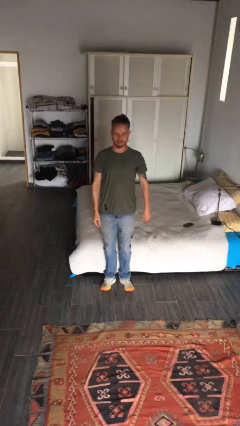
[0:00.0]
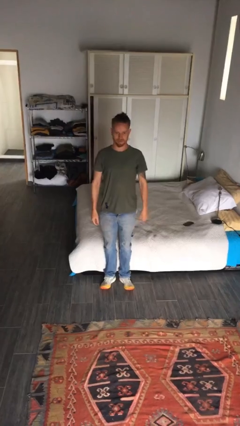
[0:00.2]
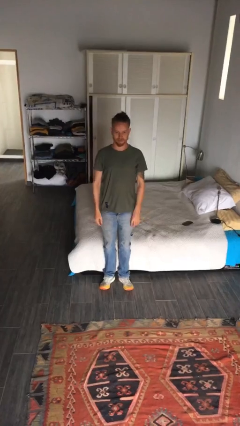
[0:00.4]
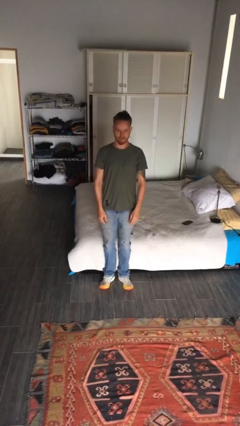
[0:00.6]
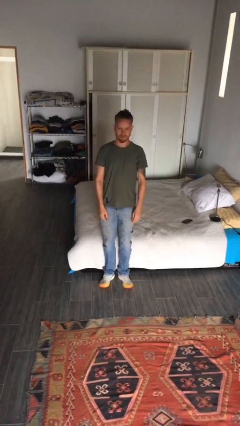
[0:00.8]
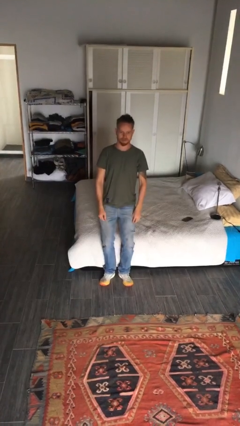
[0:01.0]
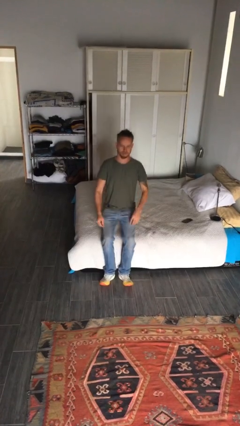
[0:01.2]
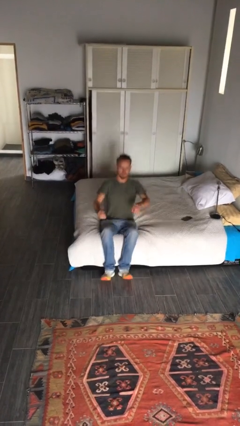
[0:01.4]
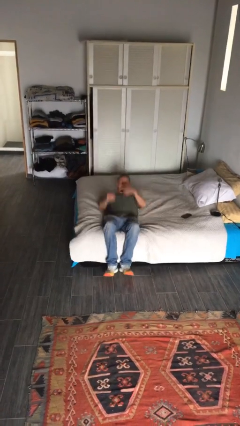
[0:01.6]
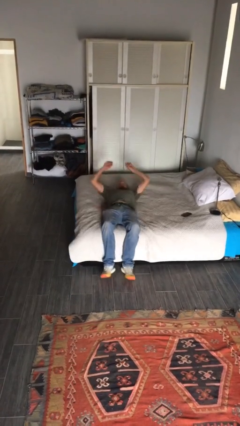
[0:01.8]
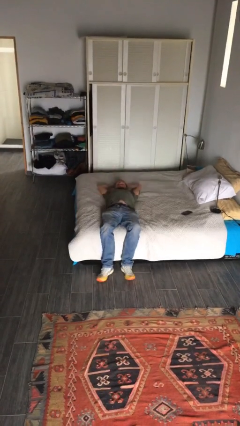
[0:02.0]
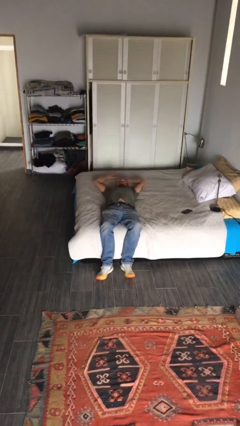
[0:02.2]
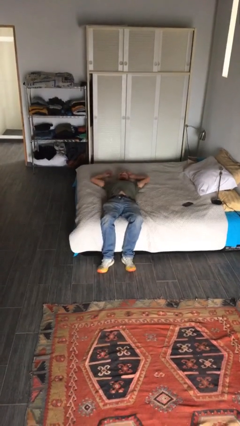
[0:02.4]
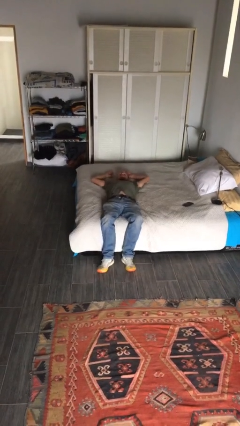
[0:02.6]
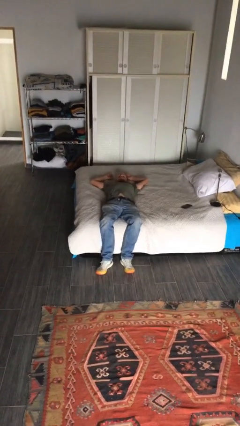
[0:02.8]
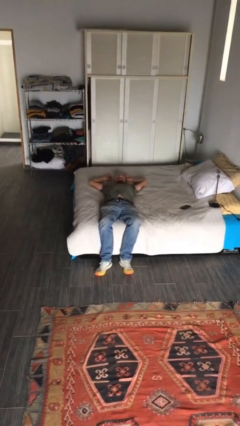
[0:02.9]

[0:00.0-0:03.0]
person lies down on couch

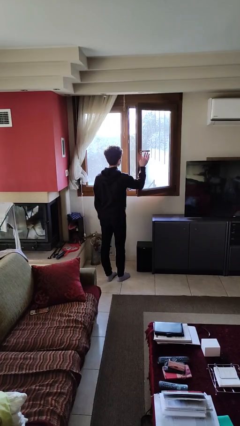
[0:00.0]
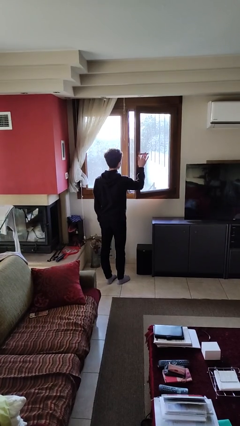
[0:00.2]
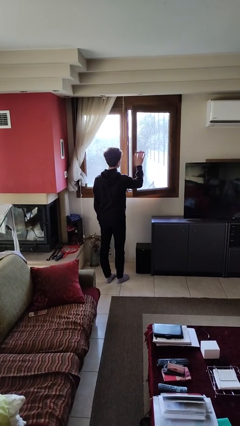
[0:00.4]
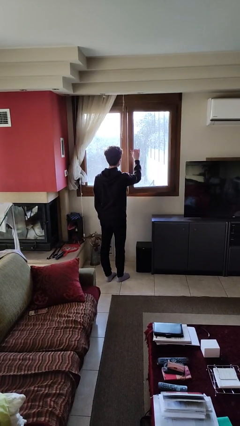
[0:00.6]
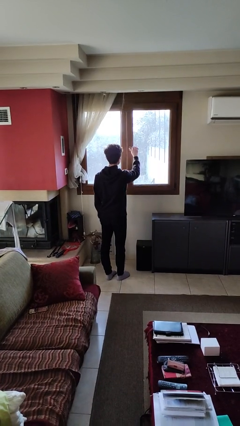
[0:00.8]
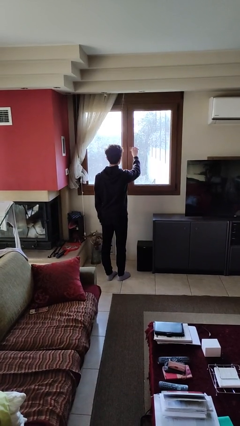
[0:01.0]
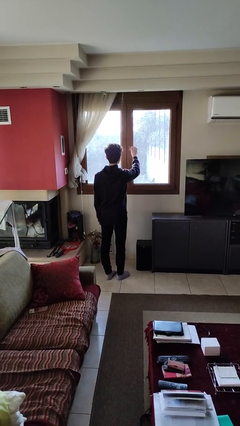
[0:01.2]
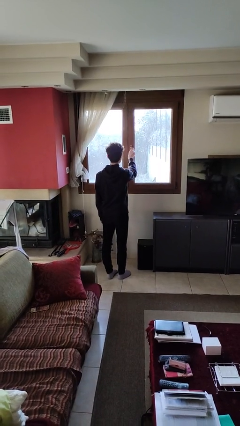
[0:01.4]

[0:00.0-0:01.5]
person closes home window

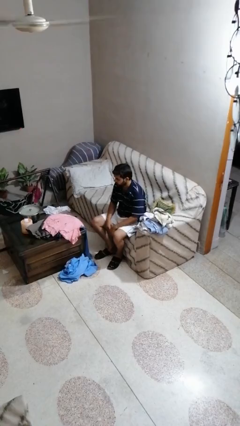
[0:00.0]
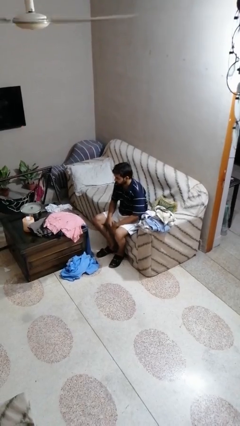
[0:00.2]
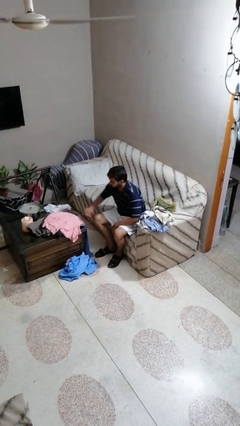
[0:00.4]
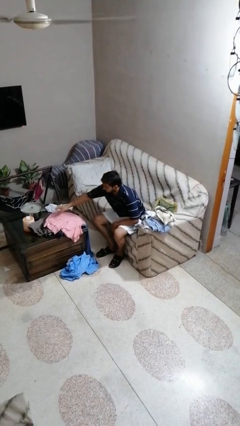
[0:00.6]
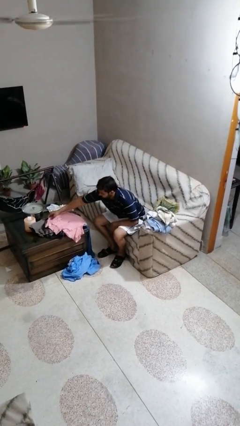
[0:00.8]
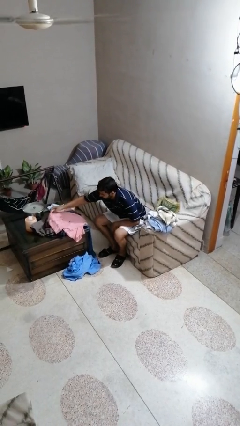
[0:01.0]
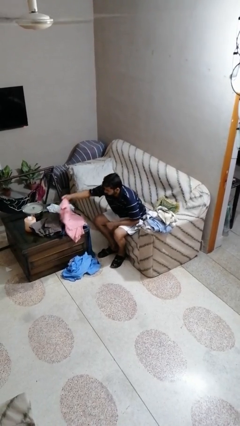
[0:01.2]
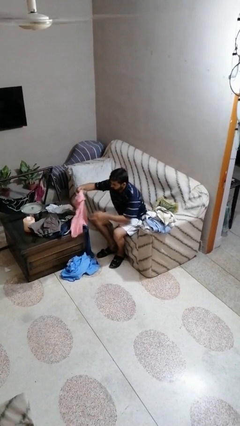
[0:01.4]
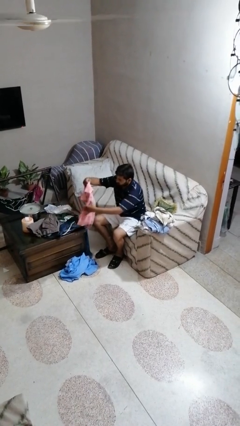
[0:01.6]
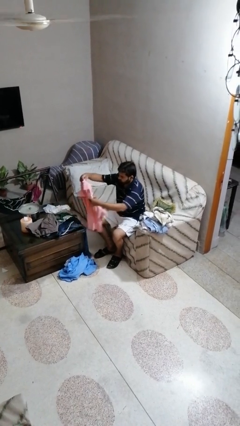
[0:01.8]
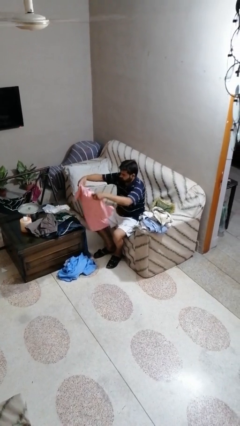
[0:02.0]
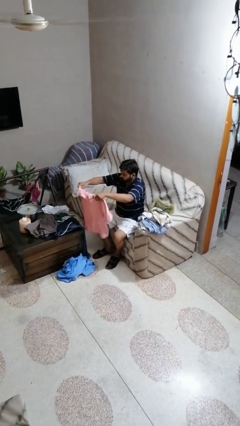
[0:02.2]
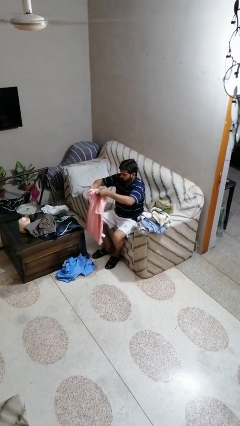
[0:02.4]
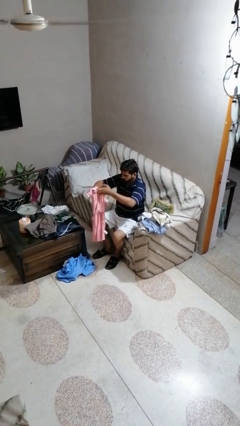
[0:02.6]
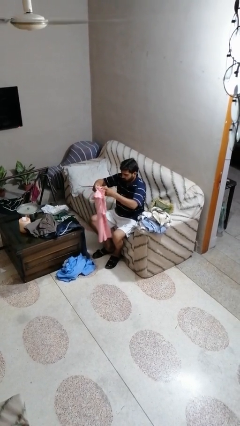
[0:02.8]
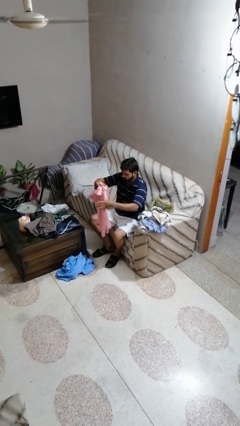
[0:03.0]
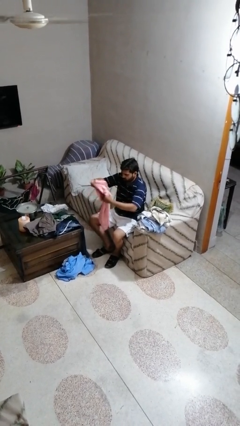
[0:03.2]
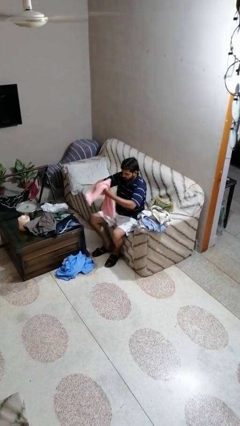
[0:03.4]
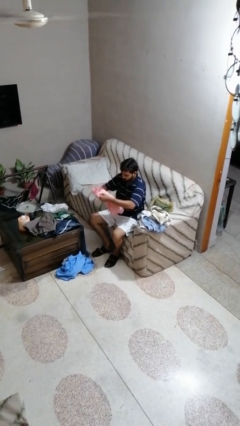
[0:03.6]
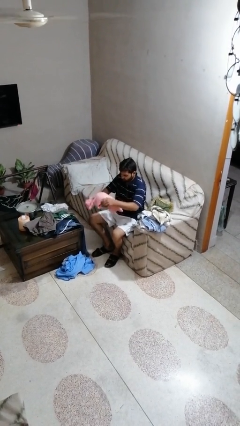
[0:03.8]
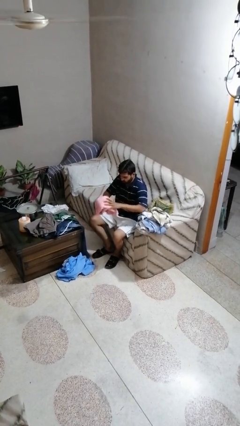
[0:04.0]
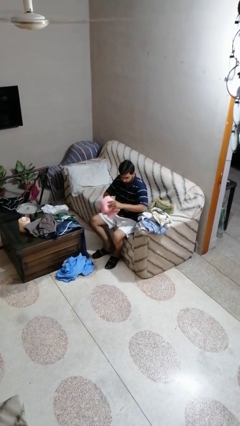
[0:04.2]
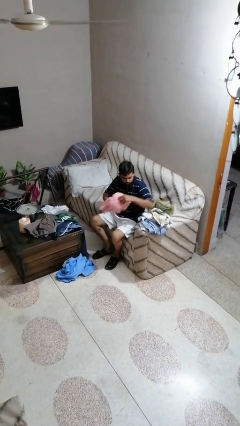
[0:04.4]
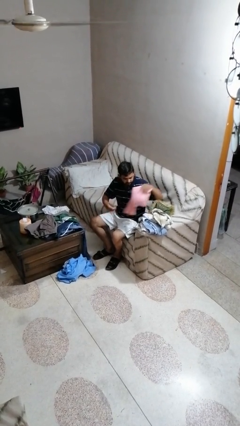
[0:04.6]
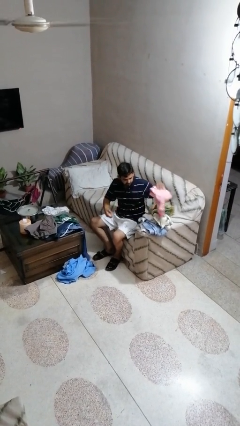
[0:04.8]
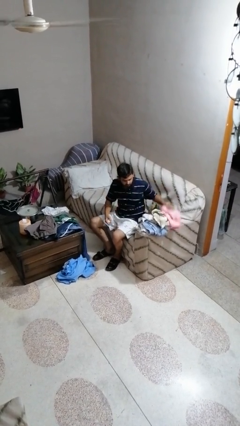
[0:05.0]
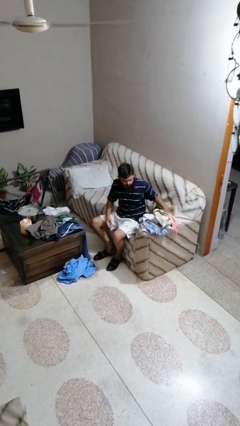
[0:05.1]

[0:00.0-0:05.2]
person folds shirt

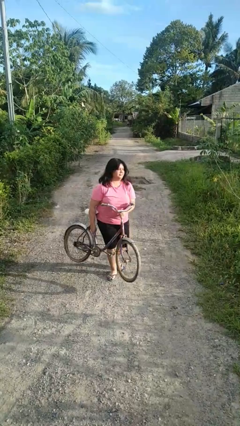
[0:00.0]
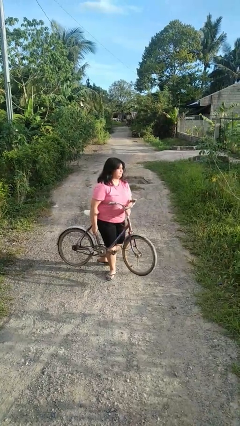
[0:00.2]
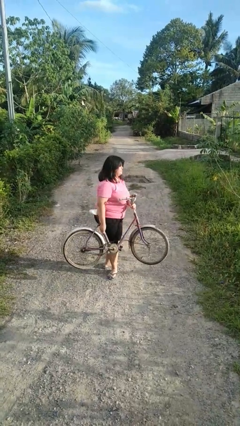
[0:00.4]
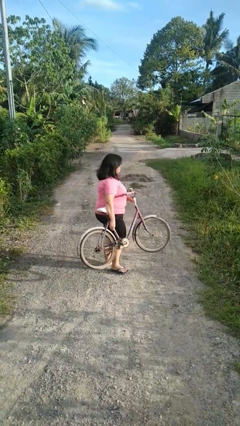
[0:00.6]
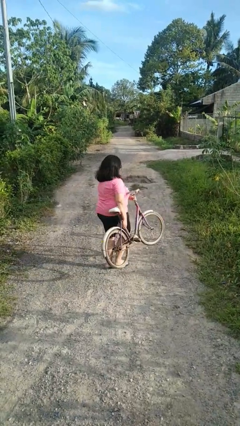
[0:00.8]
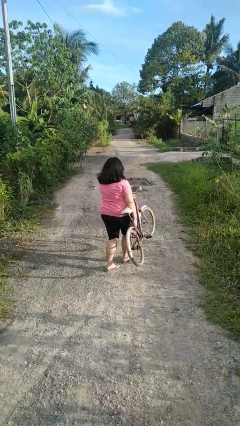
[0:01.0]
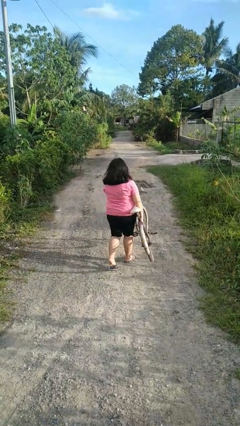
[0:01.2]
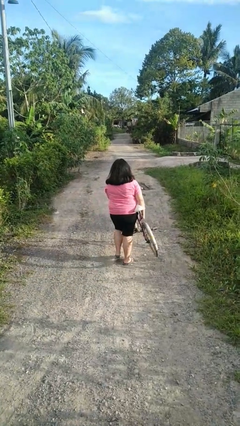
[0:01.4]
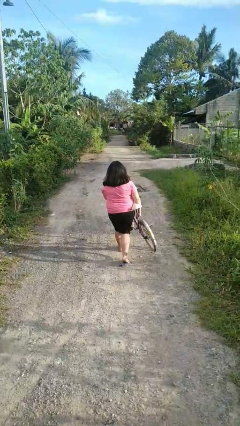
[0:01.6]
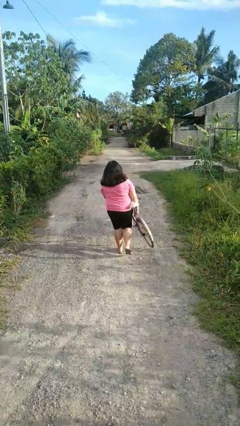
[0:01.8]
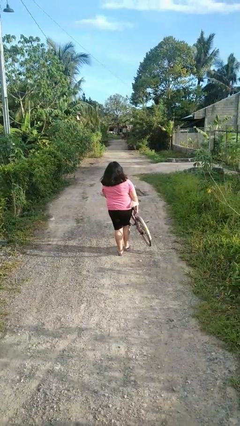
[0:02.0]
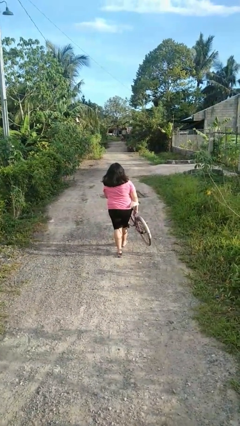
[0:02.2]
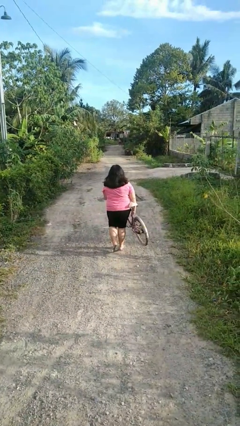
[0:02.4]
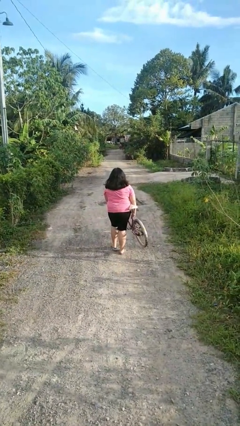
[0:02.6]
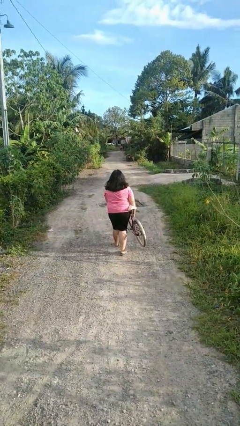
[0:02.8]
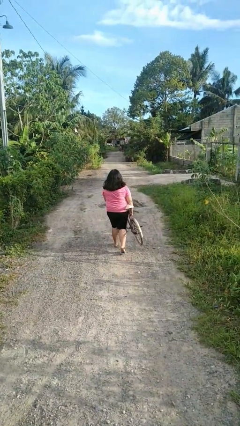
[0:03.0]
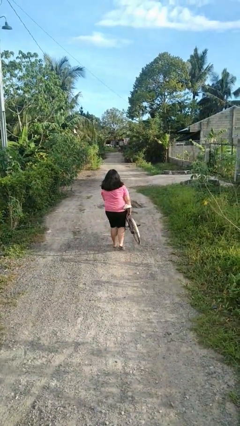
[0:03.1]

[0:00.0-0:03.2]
person carries bicycle

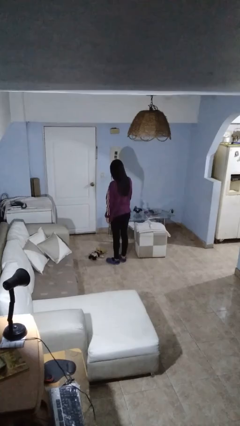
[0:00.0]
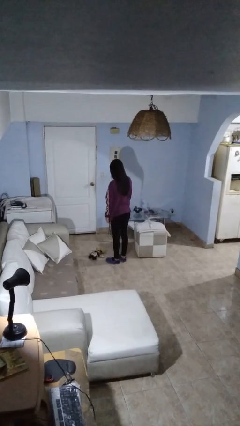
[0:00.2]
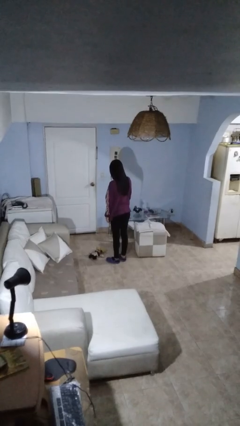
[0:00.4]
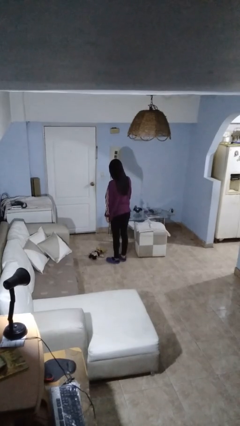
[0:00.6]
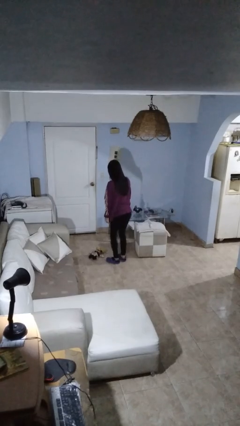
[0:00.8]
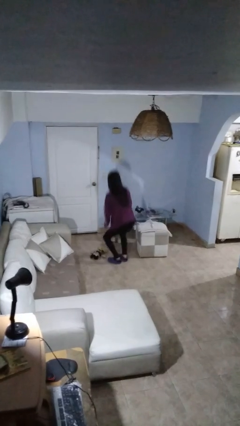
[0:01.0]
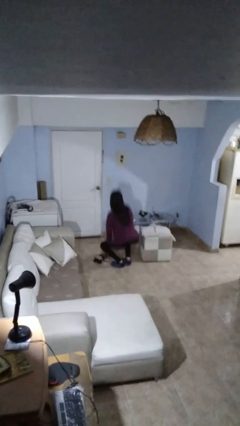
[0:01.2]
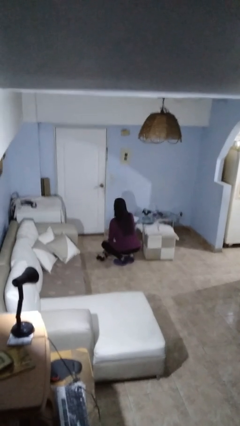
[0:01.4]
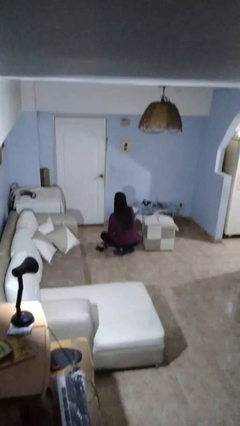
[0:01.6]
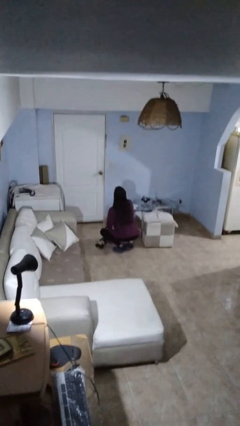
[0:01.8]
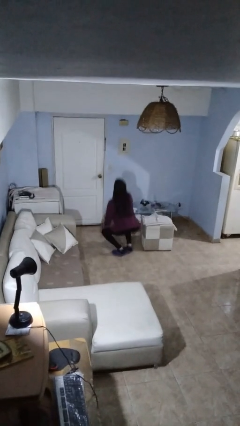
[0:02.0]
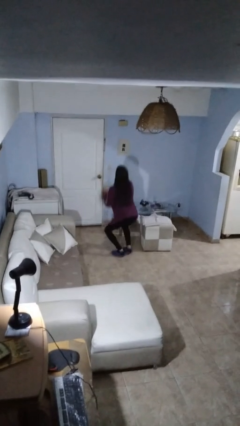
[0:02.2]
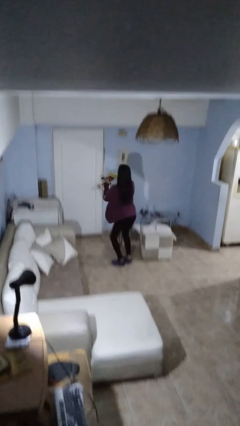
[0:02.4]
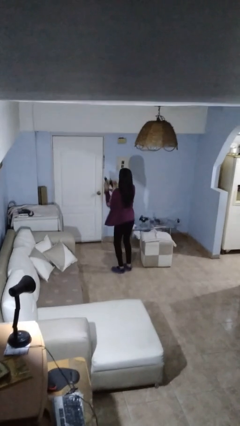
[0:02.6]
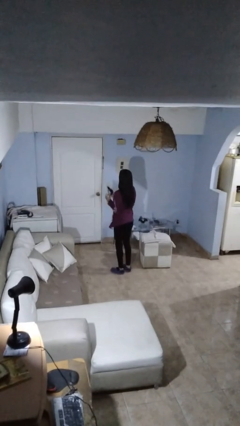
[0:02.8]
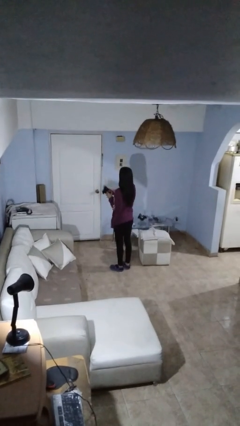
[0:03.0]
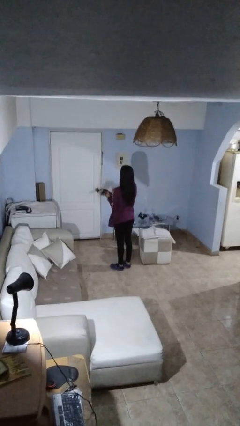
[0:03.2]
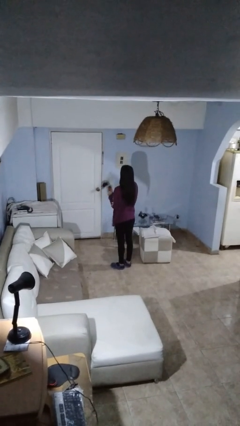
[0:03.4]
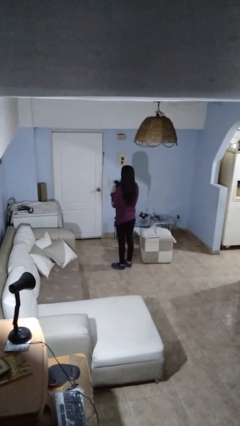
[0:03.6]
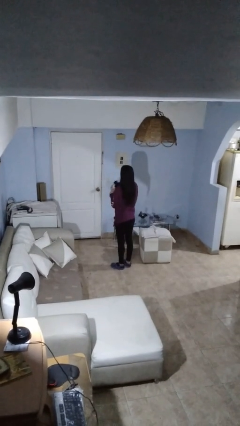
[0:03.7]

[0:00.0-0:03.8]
person picks up object from floor

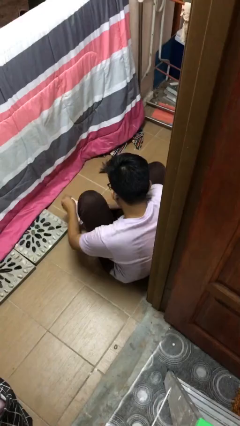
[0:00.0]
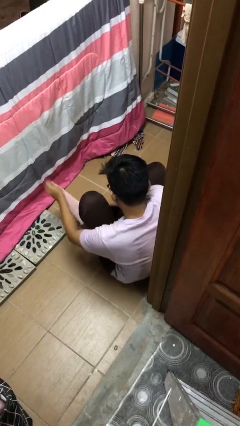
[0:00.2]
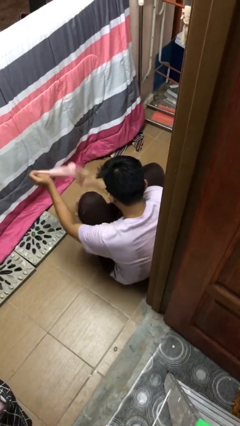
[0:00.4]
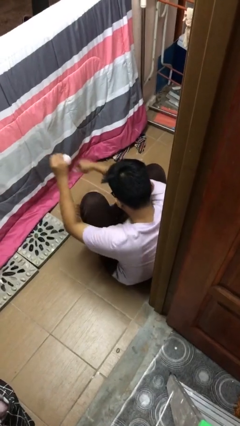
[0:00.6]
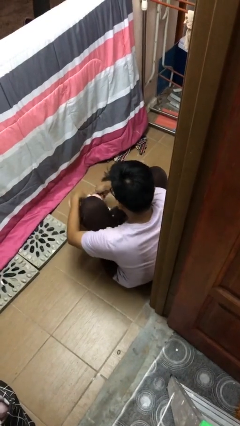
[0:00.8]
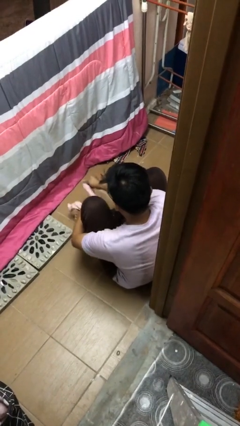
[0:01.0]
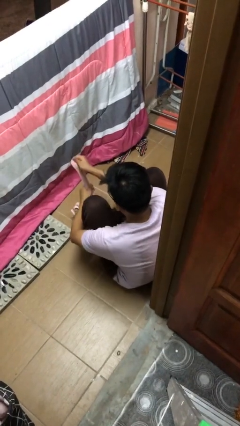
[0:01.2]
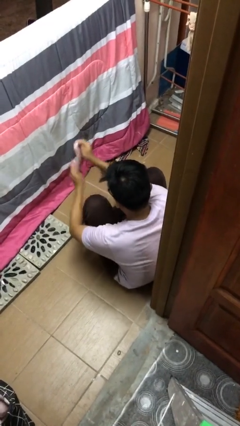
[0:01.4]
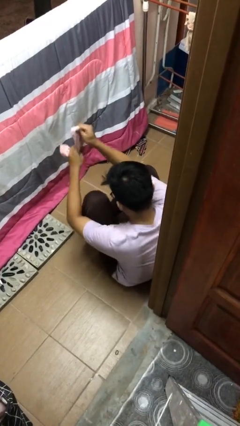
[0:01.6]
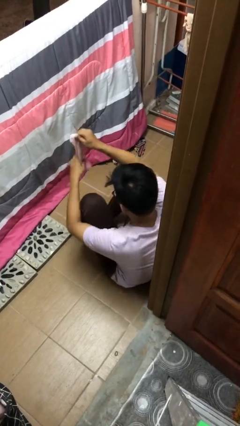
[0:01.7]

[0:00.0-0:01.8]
person takes off socks
